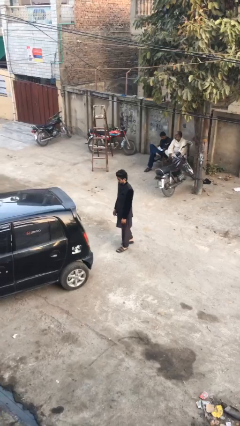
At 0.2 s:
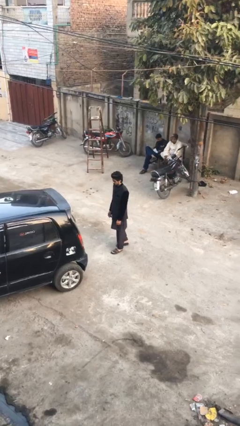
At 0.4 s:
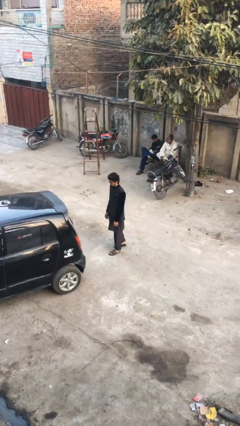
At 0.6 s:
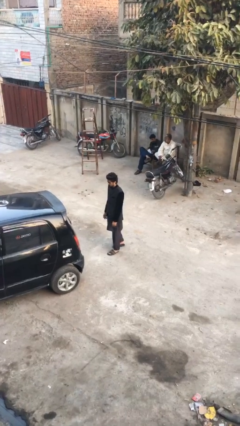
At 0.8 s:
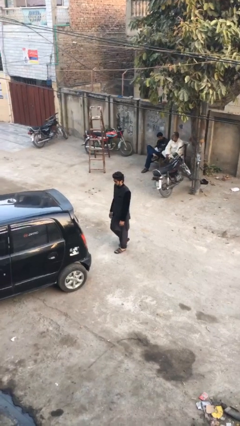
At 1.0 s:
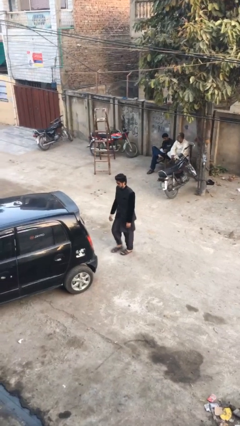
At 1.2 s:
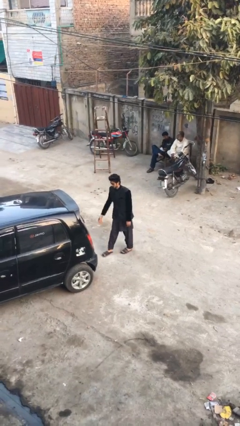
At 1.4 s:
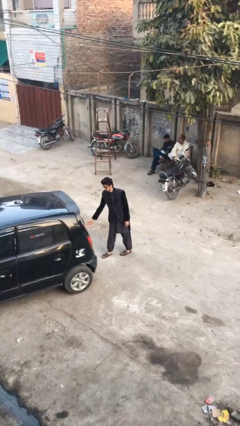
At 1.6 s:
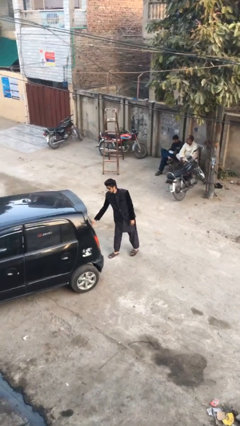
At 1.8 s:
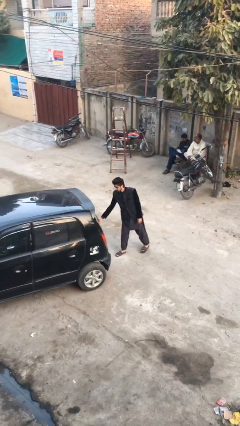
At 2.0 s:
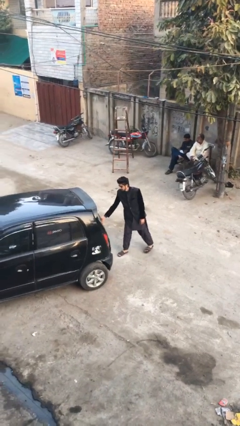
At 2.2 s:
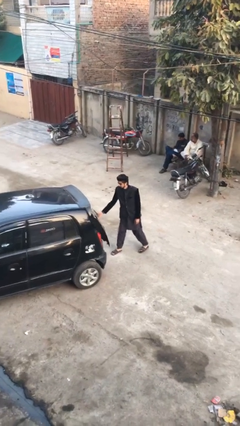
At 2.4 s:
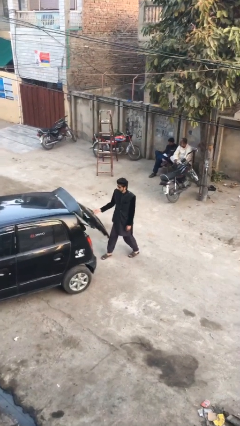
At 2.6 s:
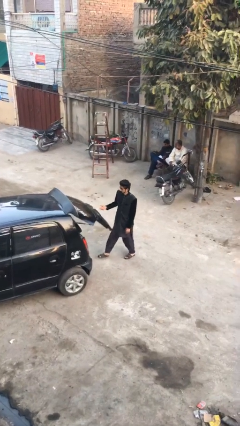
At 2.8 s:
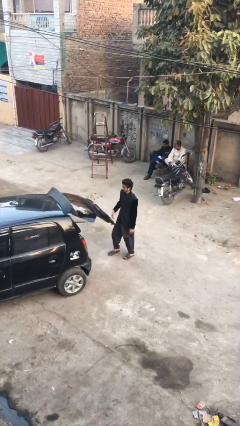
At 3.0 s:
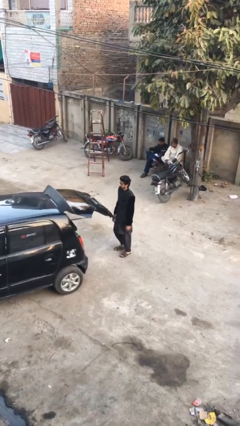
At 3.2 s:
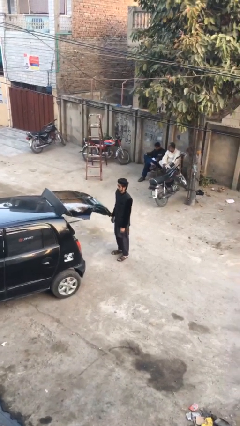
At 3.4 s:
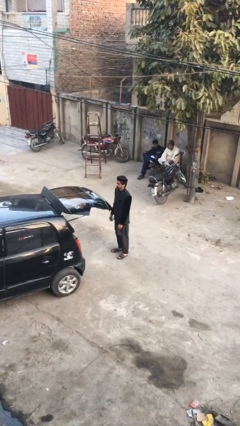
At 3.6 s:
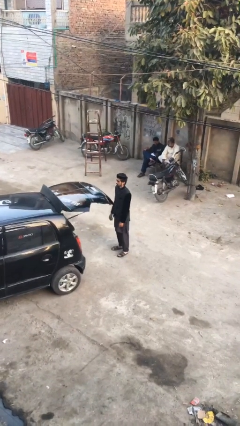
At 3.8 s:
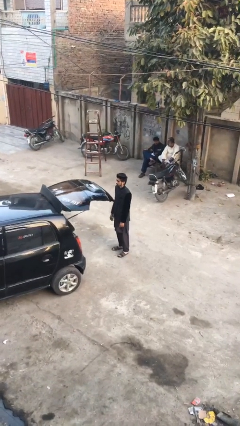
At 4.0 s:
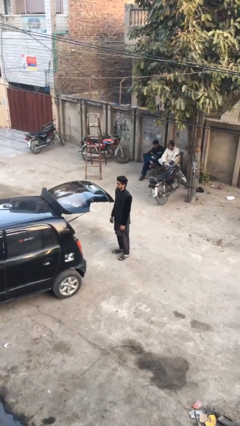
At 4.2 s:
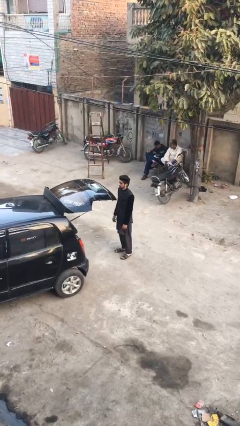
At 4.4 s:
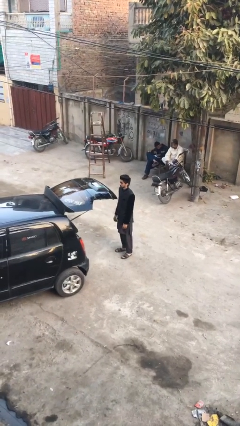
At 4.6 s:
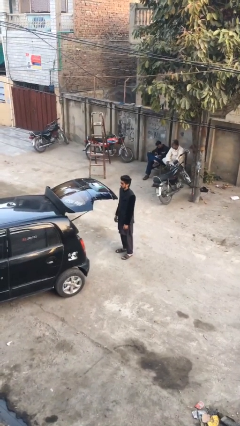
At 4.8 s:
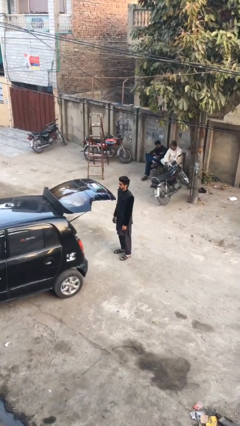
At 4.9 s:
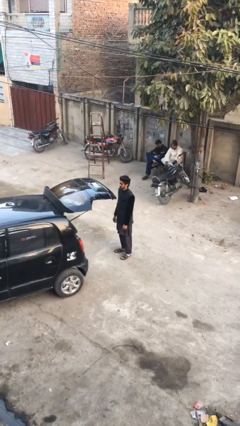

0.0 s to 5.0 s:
person opens car trunk

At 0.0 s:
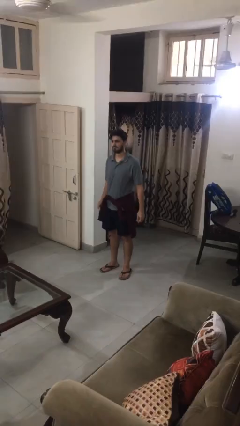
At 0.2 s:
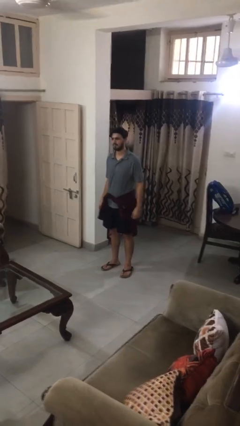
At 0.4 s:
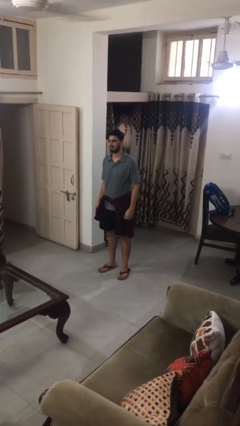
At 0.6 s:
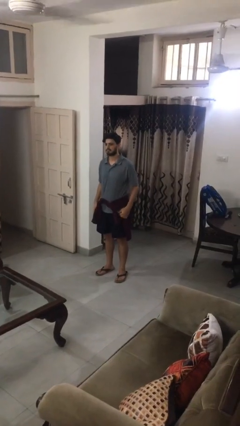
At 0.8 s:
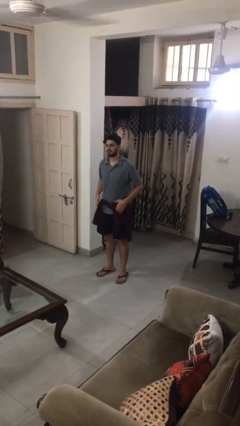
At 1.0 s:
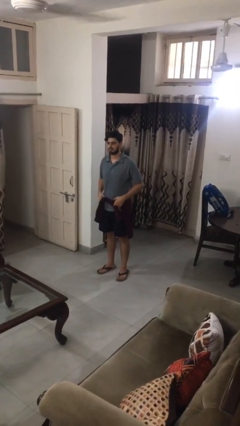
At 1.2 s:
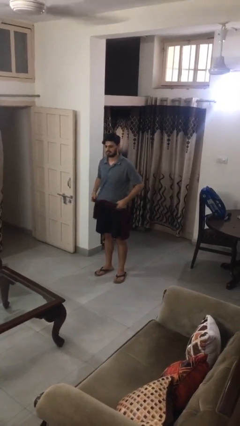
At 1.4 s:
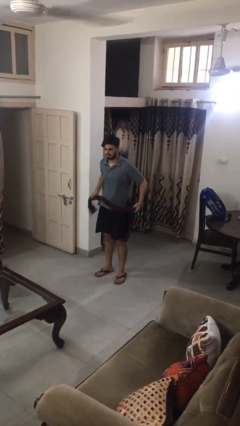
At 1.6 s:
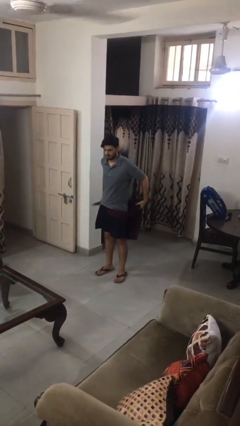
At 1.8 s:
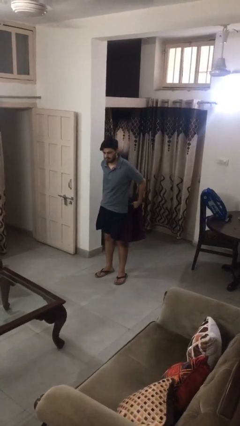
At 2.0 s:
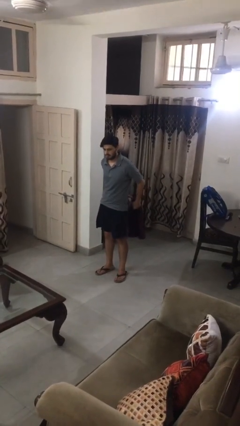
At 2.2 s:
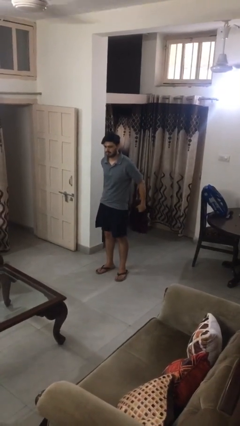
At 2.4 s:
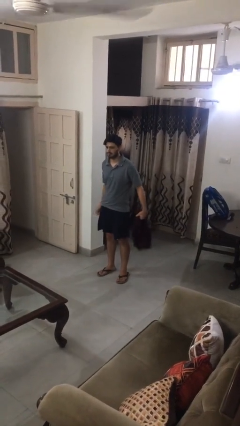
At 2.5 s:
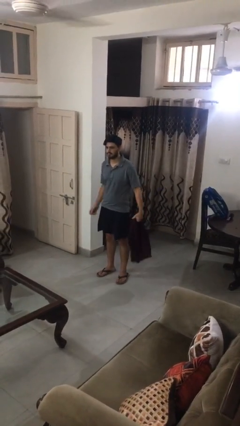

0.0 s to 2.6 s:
person unties jacket around waist

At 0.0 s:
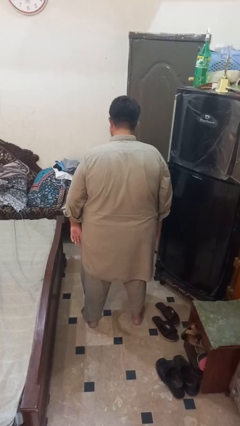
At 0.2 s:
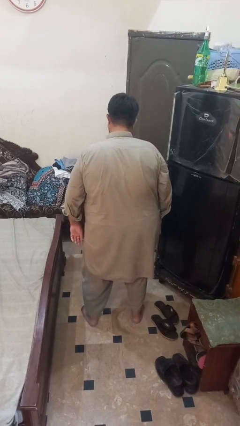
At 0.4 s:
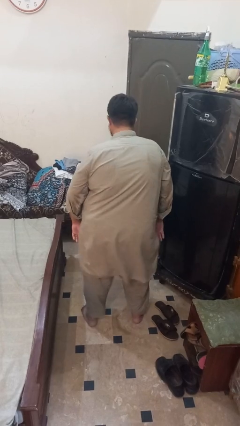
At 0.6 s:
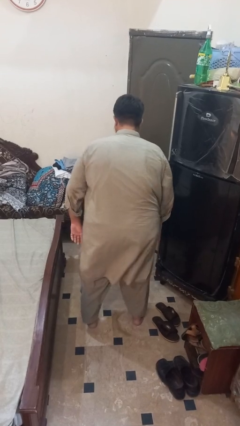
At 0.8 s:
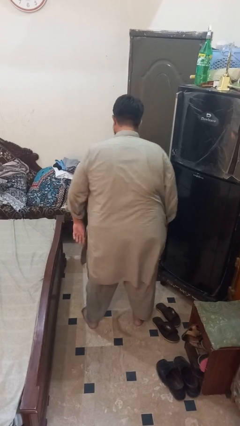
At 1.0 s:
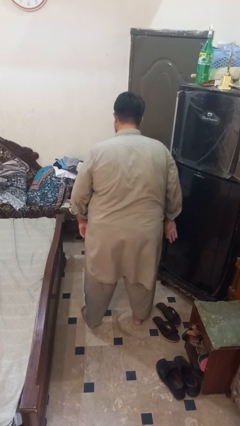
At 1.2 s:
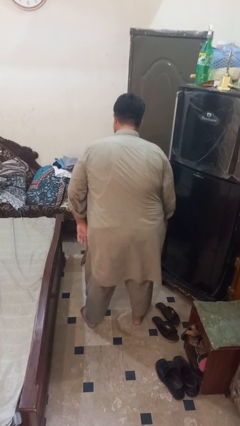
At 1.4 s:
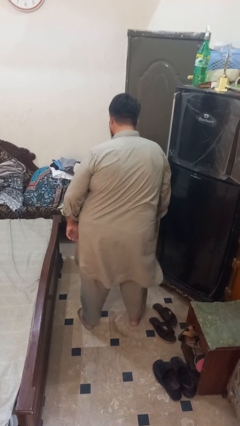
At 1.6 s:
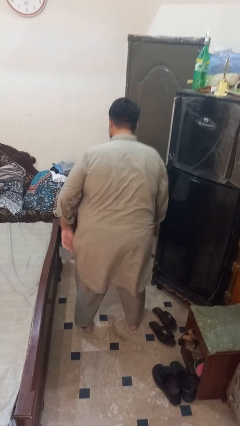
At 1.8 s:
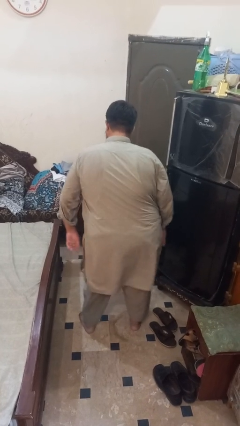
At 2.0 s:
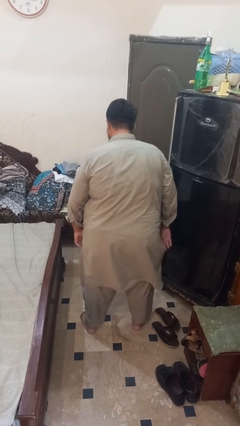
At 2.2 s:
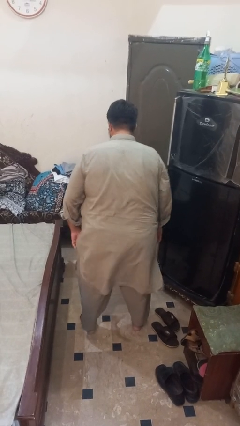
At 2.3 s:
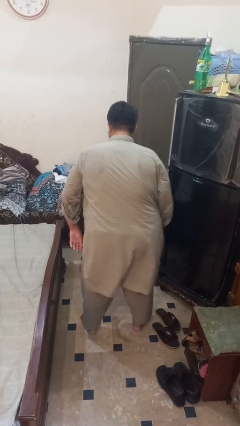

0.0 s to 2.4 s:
person wiggles hips

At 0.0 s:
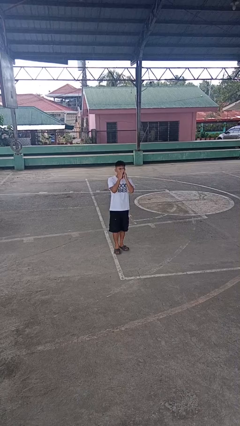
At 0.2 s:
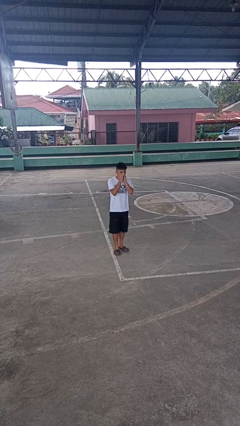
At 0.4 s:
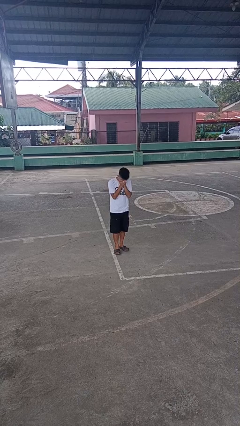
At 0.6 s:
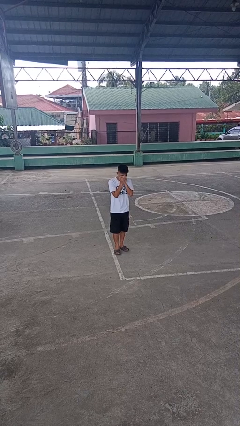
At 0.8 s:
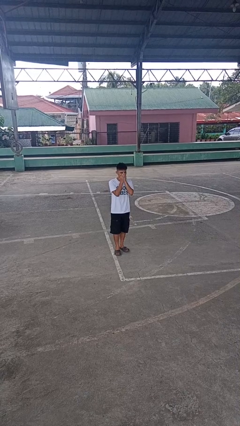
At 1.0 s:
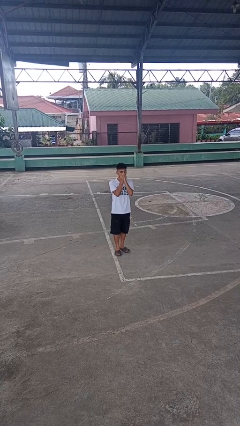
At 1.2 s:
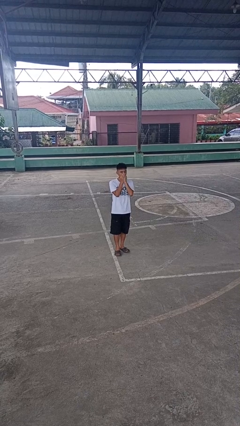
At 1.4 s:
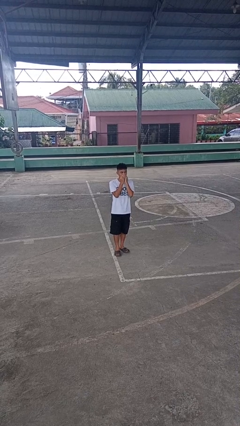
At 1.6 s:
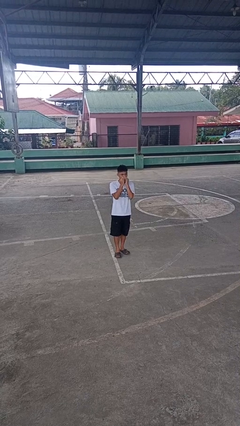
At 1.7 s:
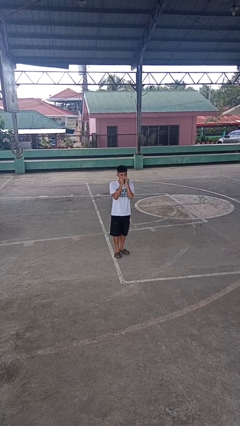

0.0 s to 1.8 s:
person sneezes into hand

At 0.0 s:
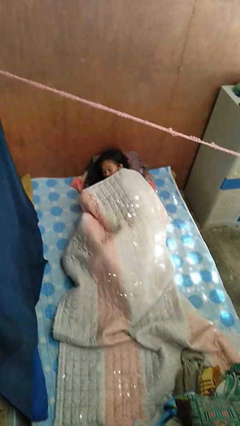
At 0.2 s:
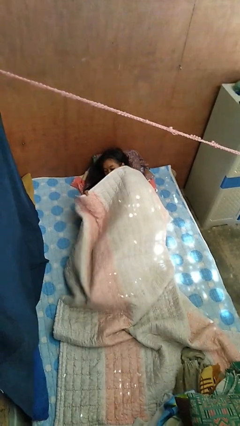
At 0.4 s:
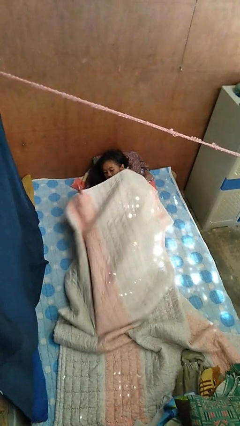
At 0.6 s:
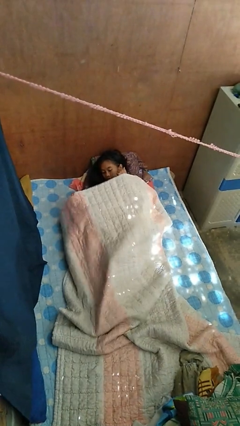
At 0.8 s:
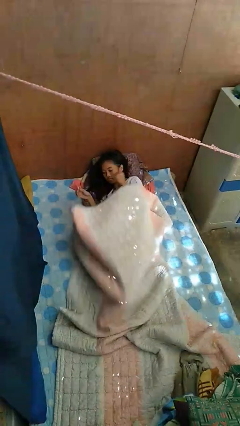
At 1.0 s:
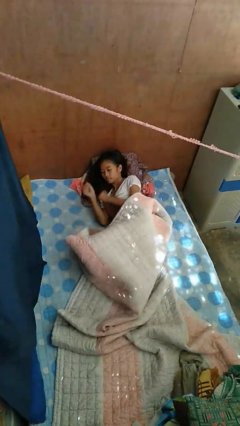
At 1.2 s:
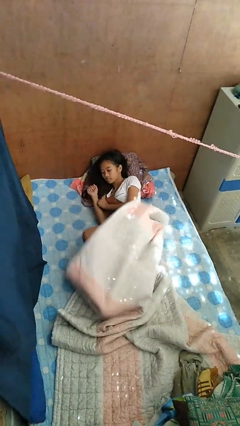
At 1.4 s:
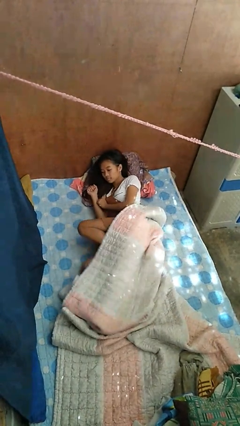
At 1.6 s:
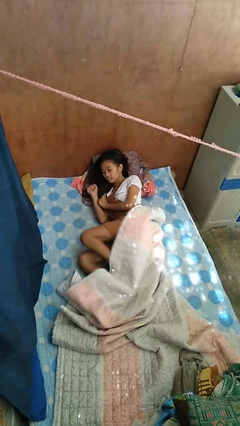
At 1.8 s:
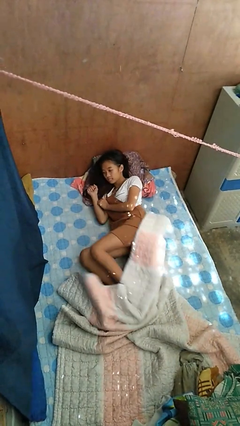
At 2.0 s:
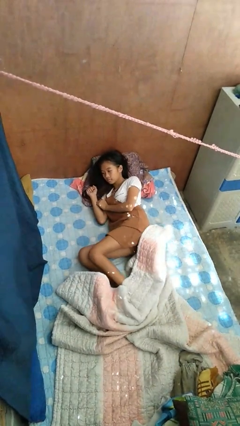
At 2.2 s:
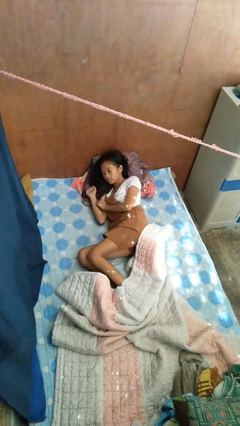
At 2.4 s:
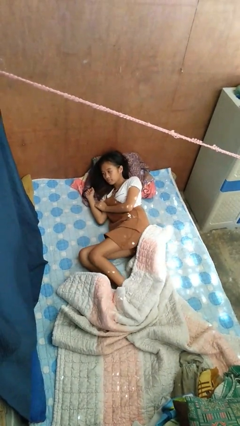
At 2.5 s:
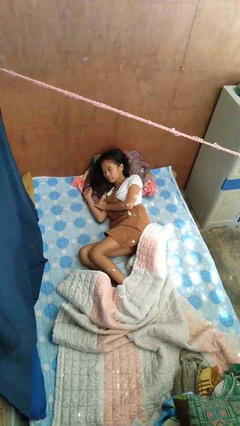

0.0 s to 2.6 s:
person uncovers with bedsheets

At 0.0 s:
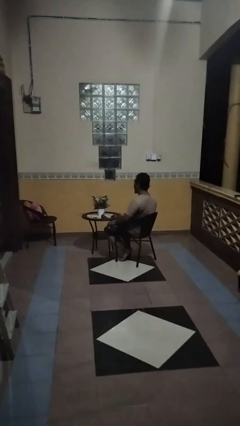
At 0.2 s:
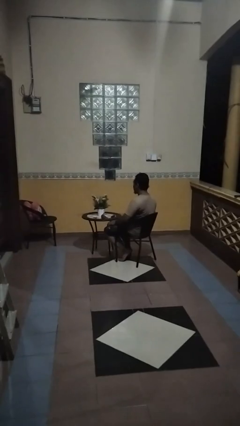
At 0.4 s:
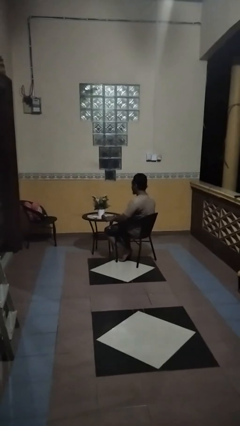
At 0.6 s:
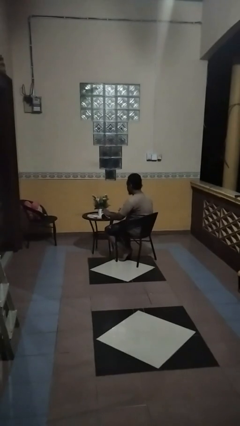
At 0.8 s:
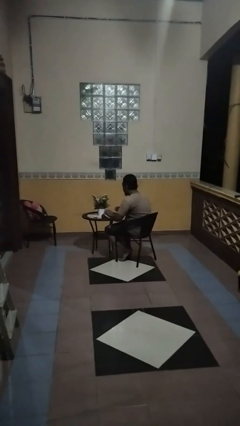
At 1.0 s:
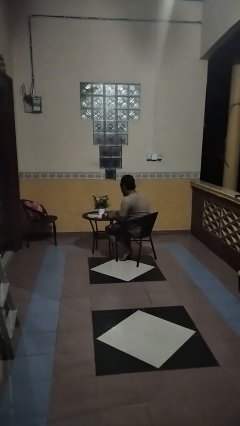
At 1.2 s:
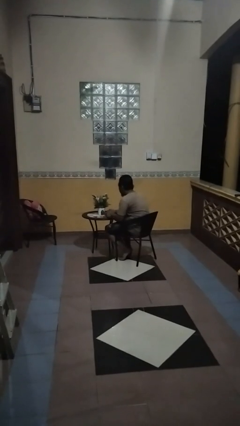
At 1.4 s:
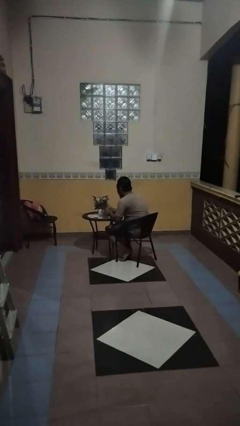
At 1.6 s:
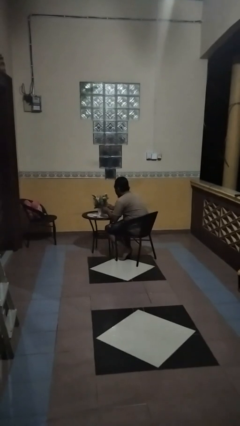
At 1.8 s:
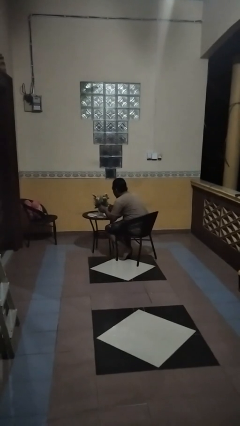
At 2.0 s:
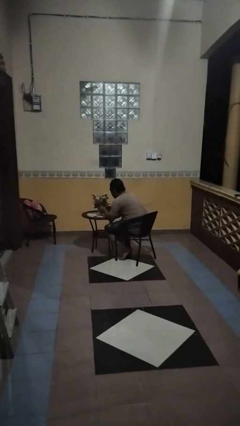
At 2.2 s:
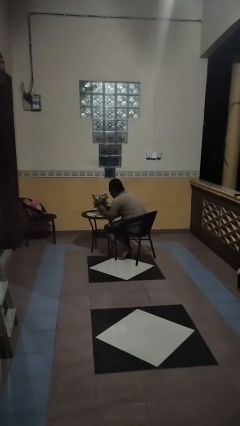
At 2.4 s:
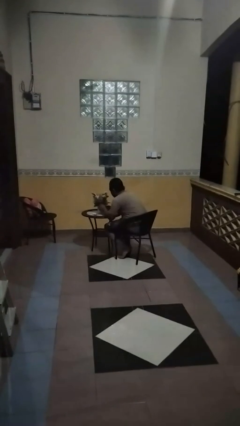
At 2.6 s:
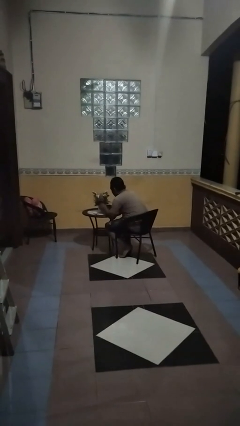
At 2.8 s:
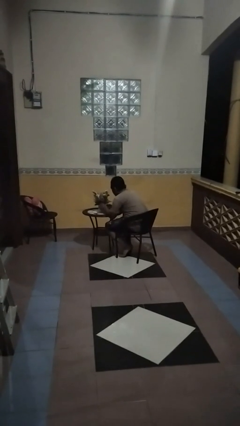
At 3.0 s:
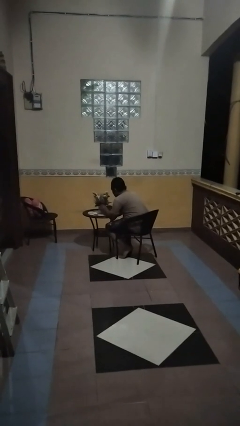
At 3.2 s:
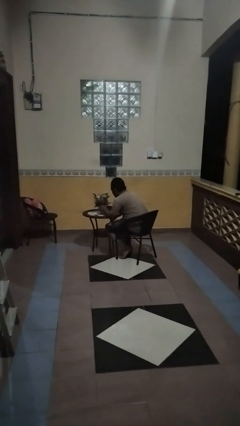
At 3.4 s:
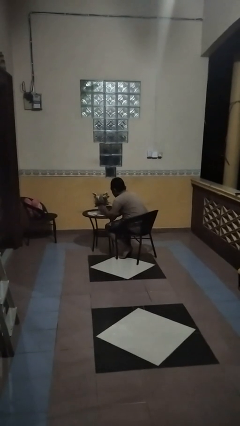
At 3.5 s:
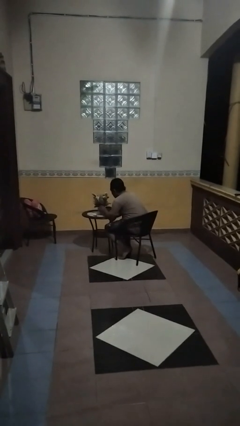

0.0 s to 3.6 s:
person arranges flowers in vase
